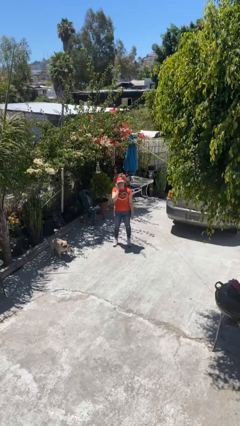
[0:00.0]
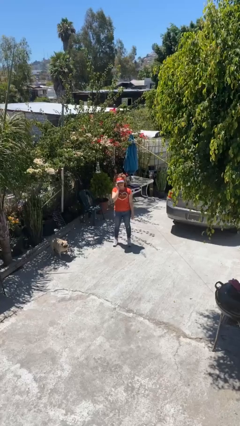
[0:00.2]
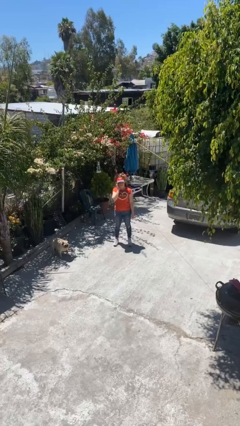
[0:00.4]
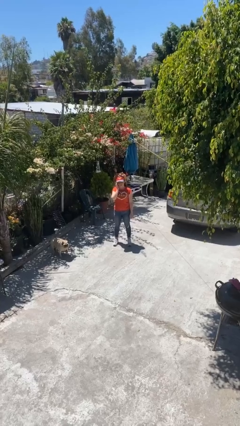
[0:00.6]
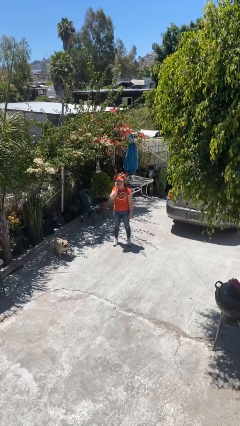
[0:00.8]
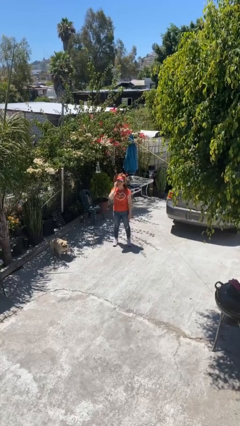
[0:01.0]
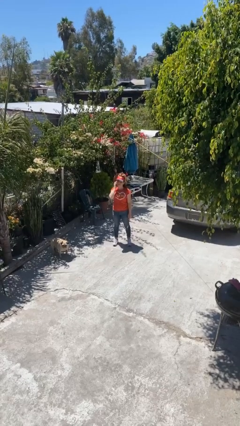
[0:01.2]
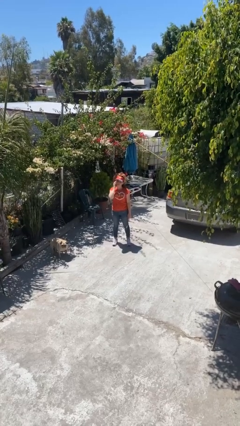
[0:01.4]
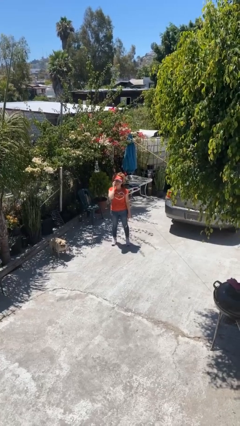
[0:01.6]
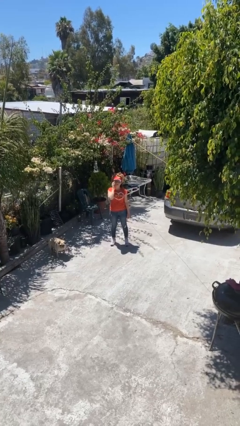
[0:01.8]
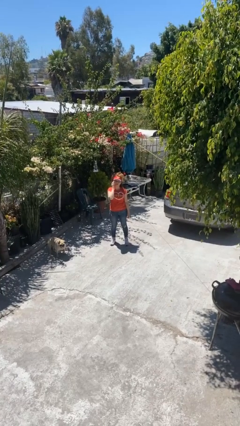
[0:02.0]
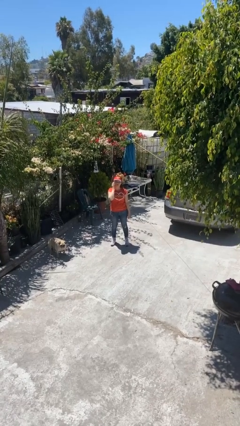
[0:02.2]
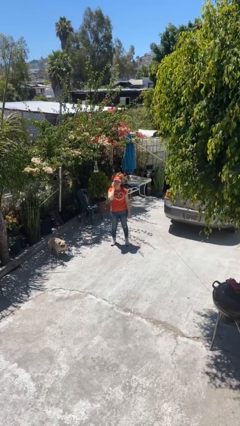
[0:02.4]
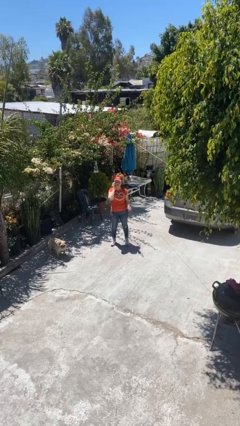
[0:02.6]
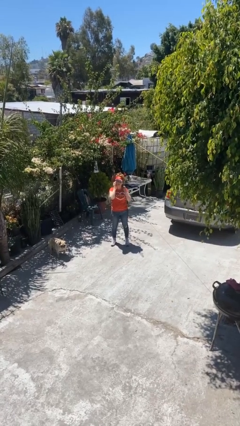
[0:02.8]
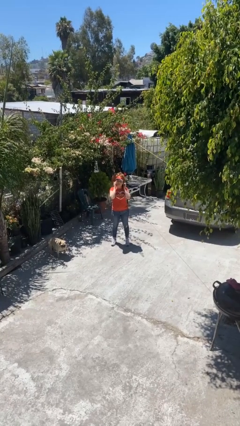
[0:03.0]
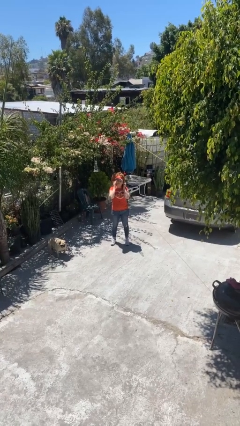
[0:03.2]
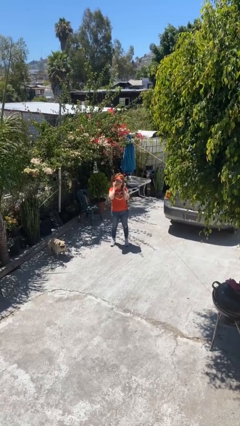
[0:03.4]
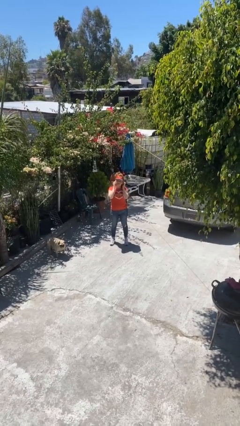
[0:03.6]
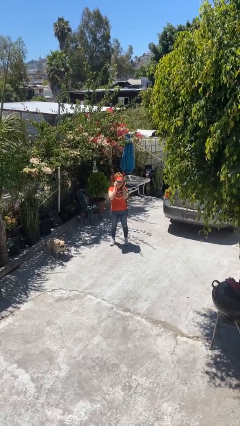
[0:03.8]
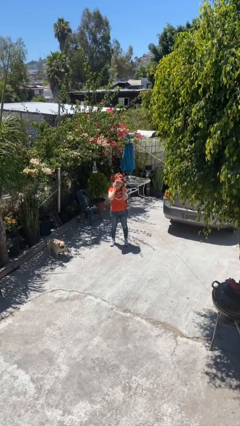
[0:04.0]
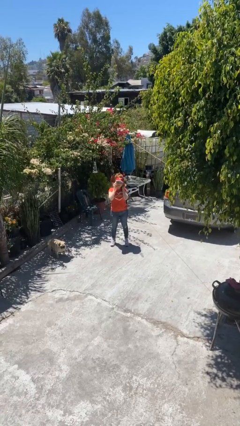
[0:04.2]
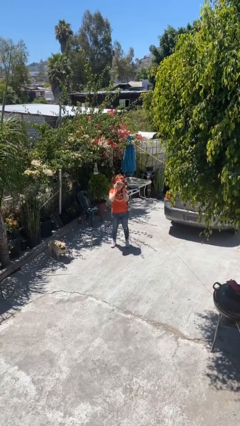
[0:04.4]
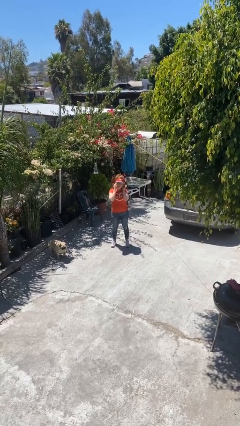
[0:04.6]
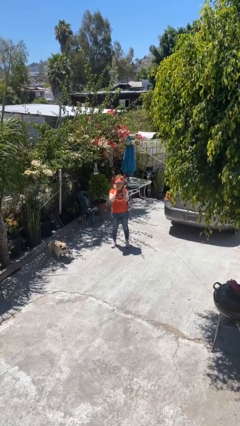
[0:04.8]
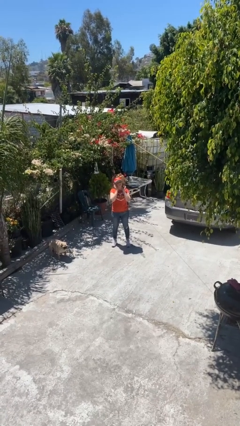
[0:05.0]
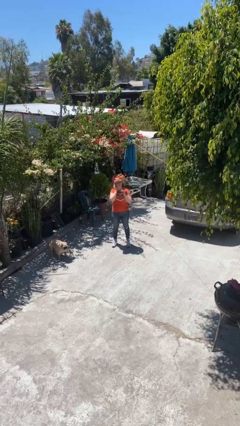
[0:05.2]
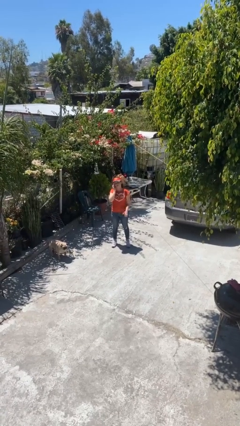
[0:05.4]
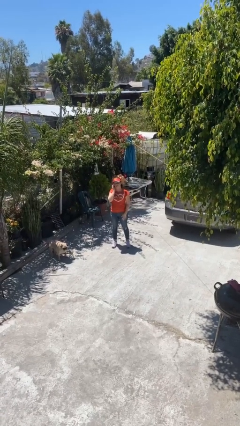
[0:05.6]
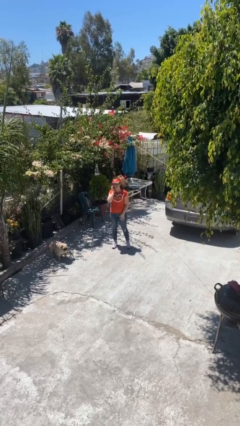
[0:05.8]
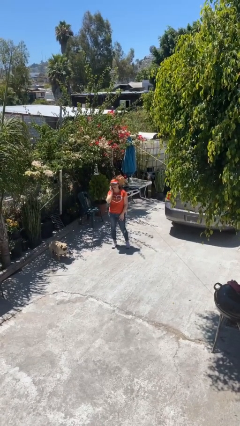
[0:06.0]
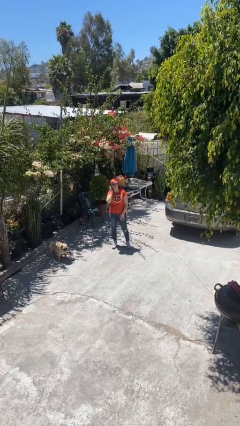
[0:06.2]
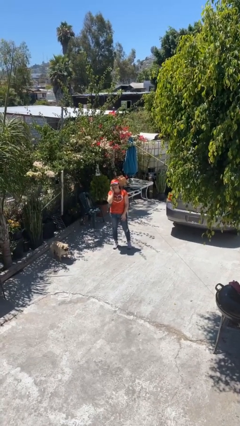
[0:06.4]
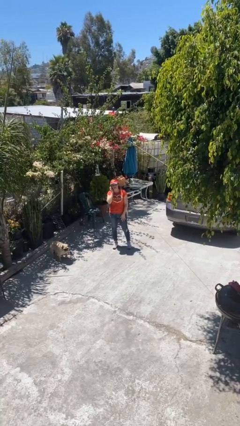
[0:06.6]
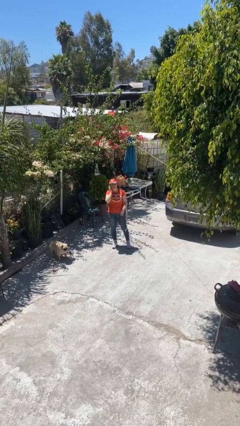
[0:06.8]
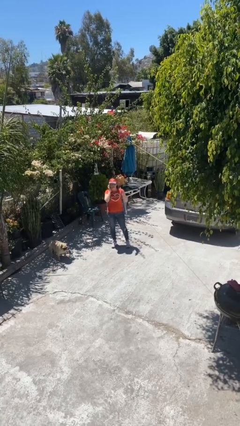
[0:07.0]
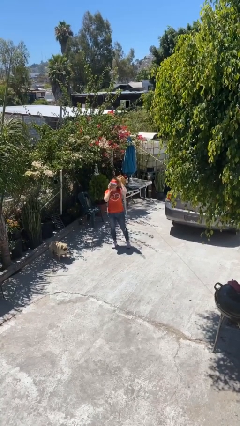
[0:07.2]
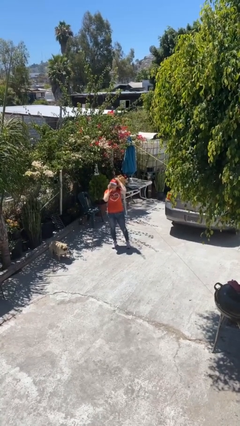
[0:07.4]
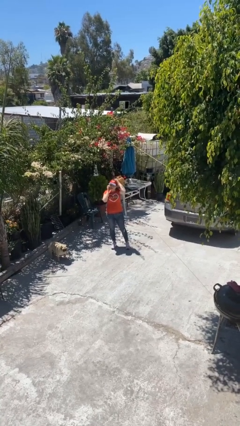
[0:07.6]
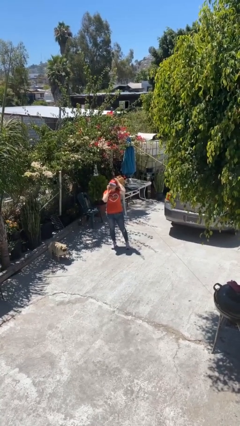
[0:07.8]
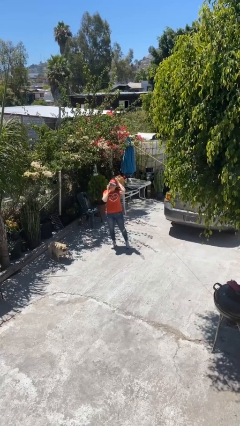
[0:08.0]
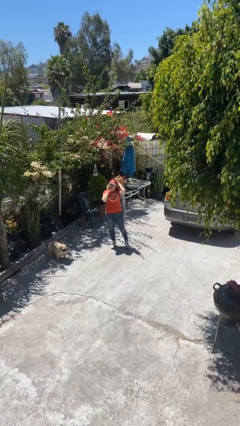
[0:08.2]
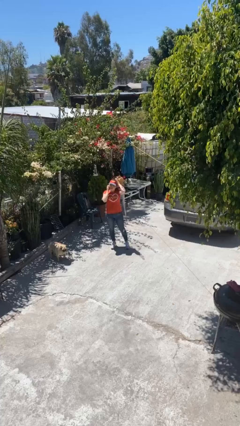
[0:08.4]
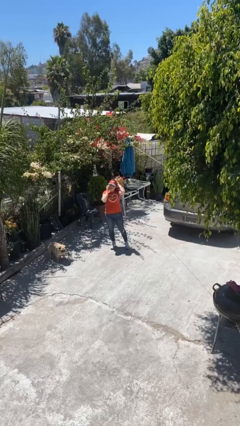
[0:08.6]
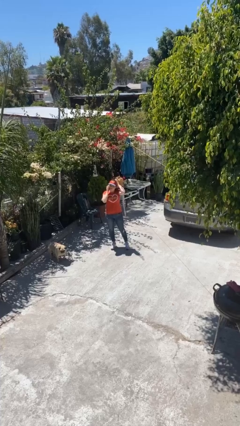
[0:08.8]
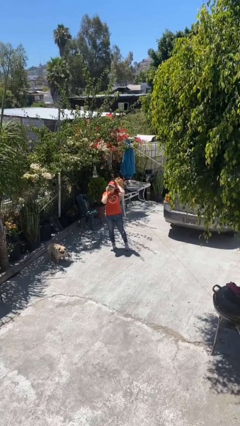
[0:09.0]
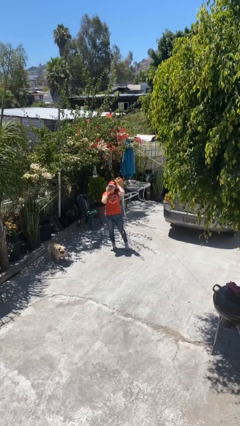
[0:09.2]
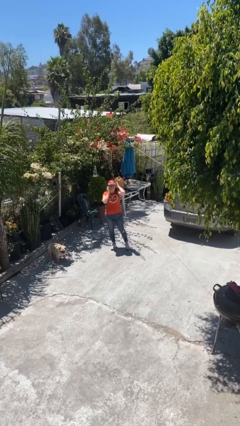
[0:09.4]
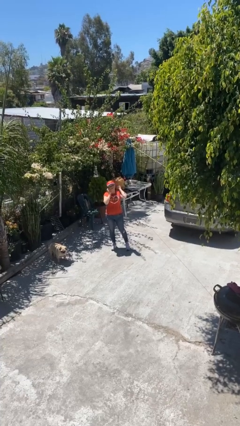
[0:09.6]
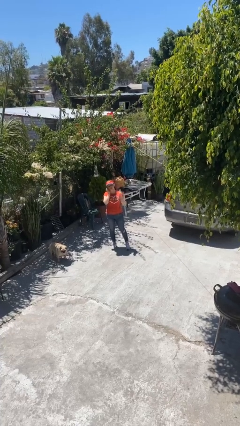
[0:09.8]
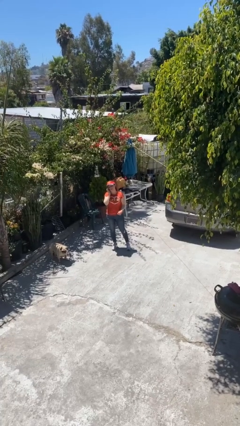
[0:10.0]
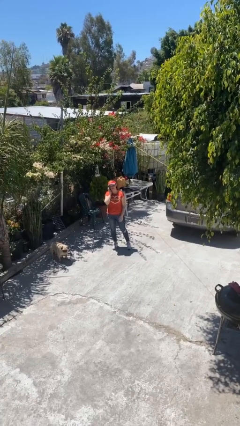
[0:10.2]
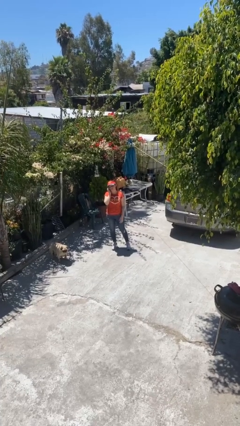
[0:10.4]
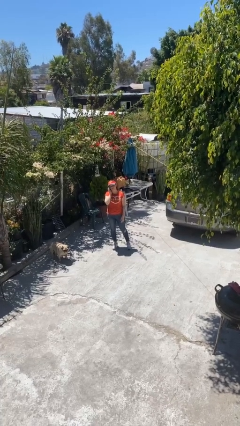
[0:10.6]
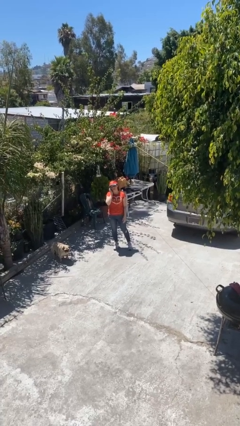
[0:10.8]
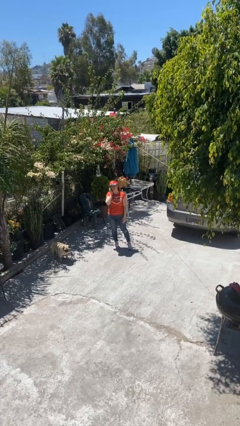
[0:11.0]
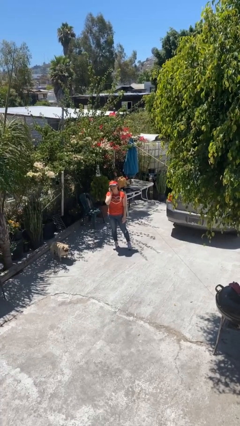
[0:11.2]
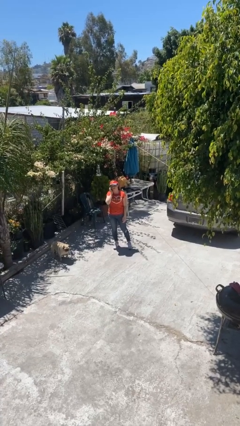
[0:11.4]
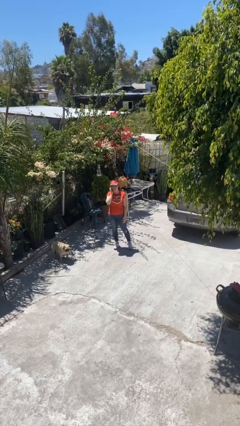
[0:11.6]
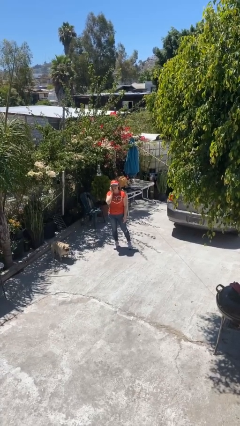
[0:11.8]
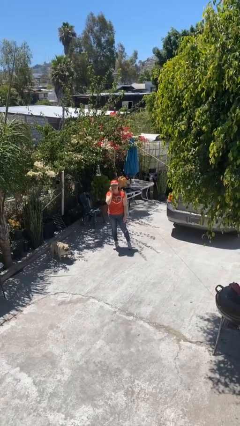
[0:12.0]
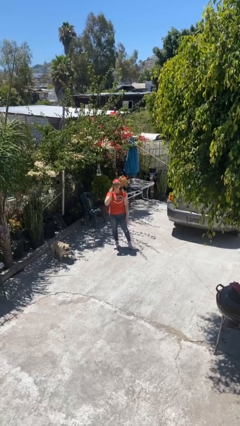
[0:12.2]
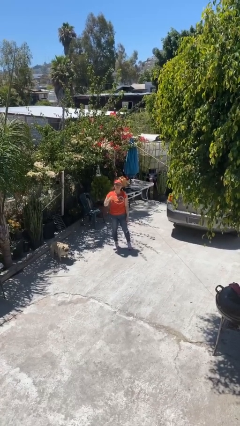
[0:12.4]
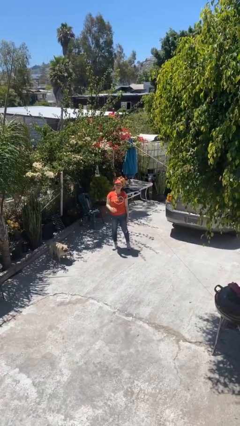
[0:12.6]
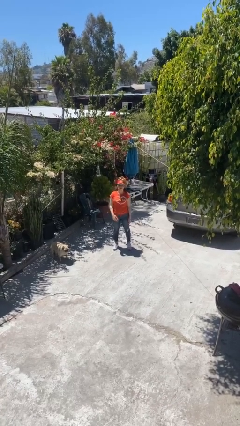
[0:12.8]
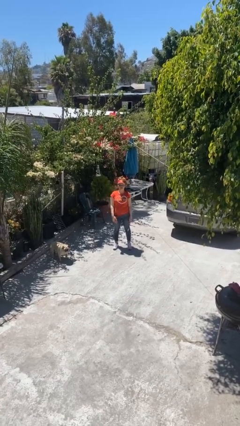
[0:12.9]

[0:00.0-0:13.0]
person talks on phone

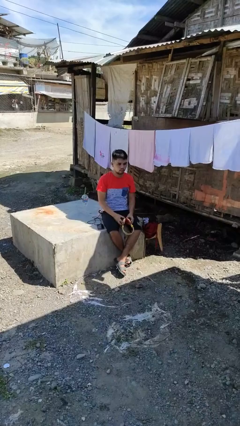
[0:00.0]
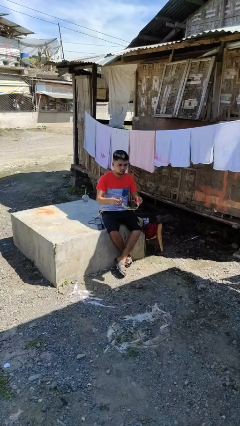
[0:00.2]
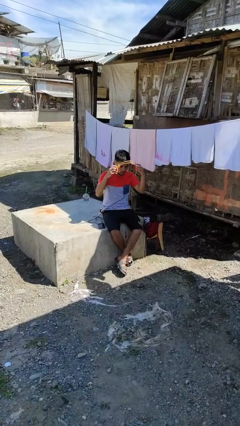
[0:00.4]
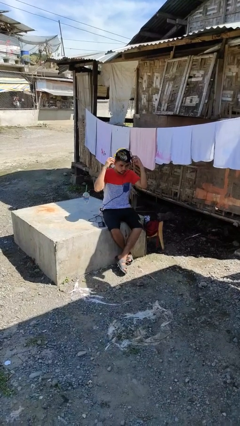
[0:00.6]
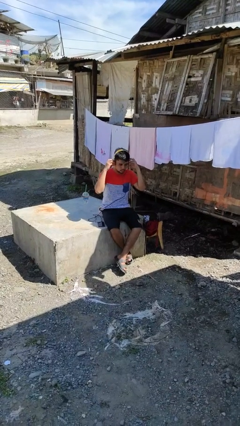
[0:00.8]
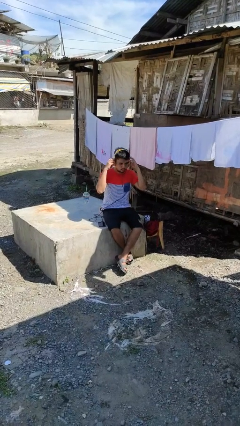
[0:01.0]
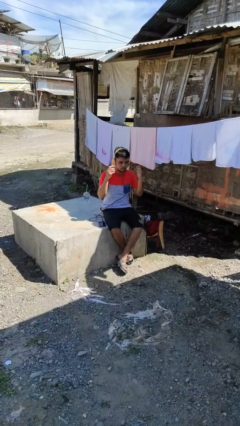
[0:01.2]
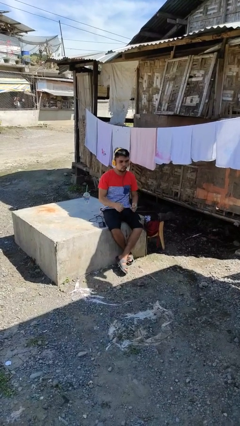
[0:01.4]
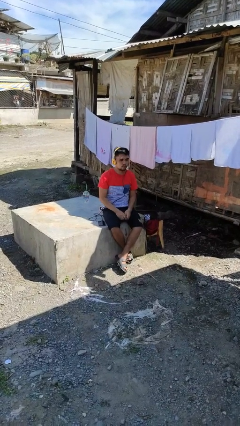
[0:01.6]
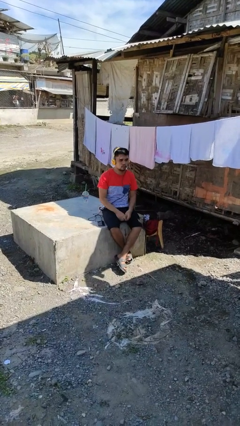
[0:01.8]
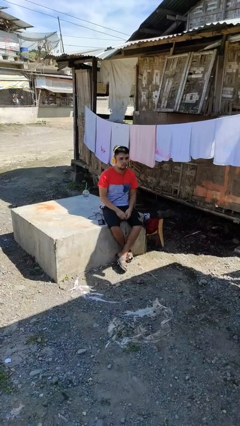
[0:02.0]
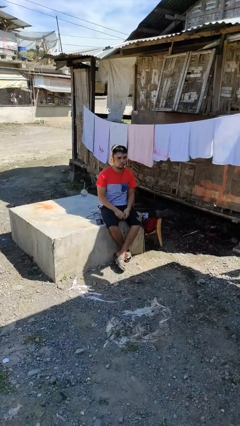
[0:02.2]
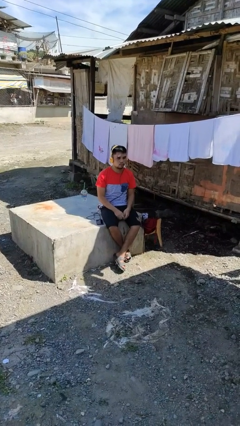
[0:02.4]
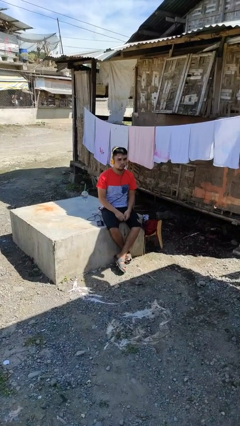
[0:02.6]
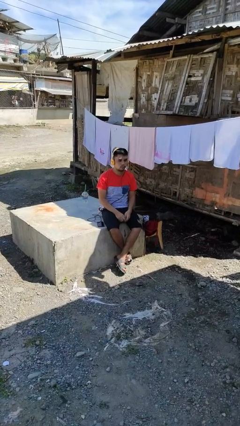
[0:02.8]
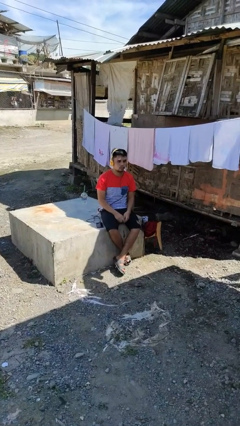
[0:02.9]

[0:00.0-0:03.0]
person puts on headphones

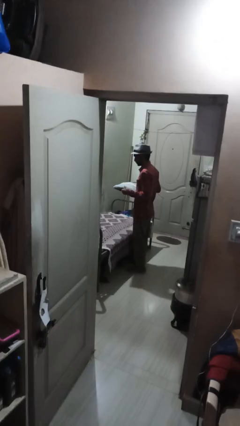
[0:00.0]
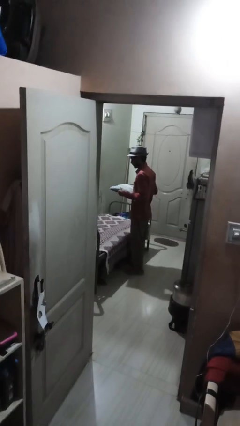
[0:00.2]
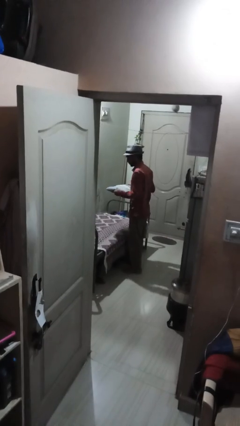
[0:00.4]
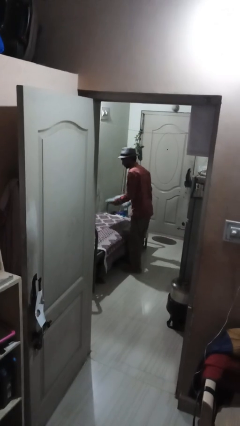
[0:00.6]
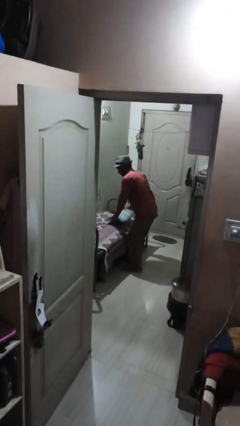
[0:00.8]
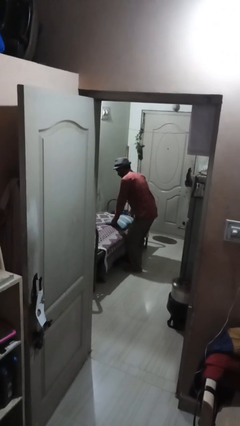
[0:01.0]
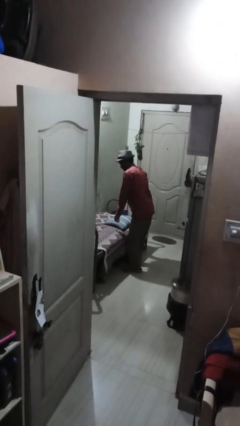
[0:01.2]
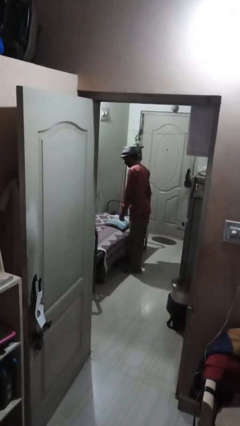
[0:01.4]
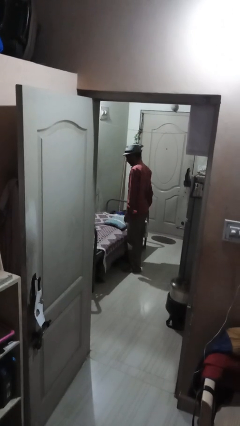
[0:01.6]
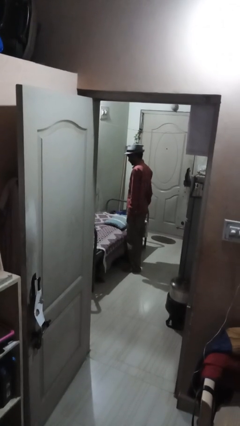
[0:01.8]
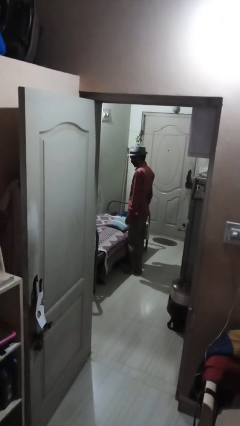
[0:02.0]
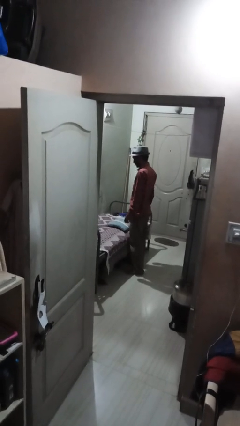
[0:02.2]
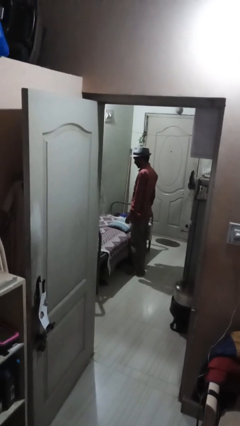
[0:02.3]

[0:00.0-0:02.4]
person puts down object on bed
